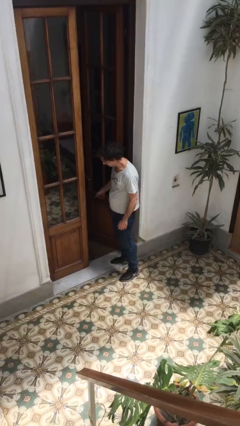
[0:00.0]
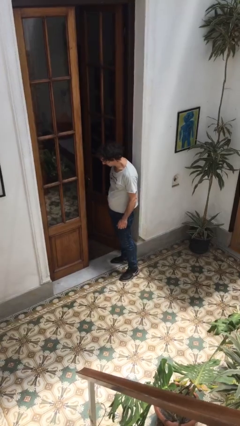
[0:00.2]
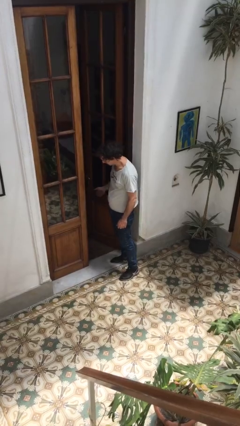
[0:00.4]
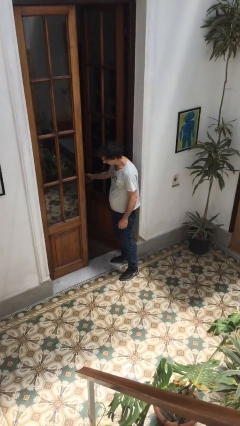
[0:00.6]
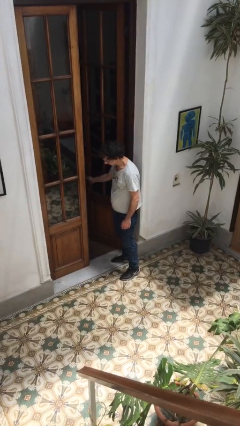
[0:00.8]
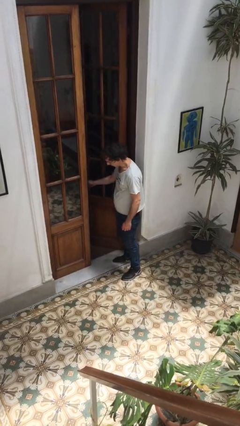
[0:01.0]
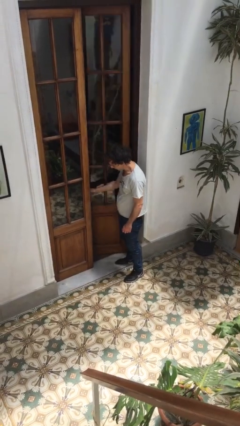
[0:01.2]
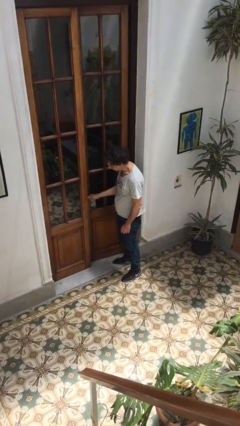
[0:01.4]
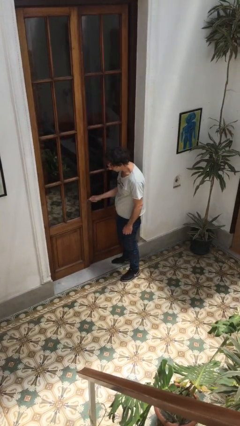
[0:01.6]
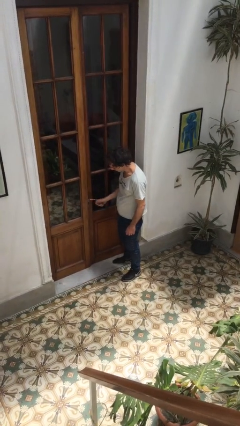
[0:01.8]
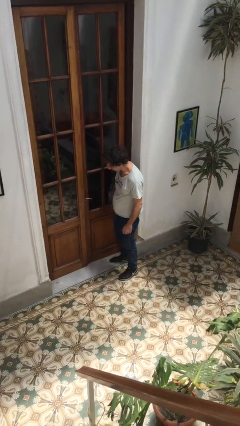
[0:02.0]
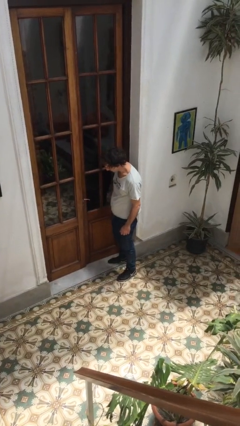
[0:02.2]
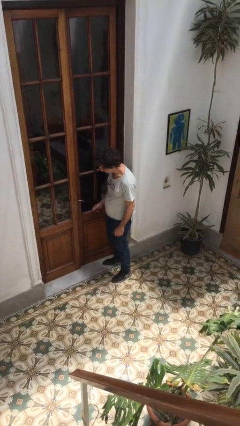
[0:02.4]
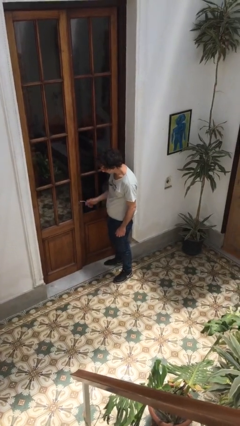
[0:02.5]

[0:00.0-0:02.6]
person closes facility door

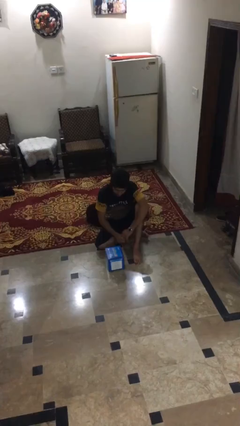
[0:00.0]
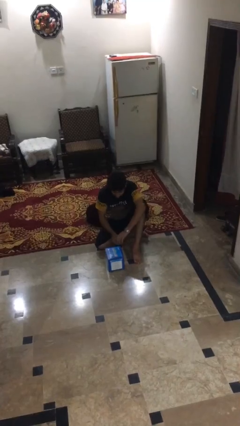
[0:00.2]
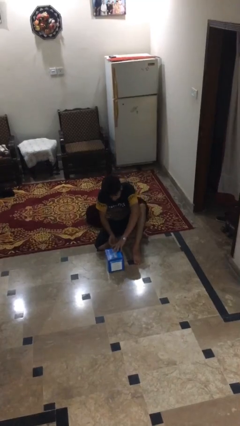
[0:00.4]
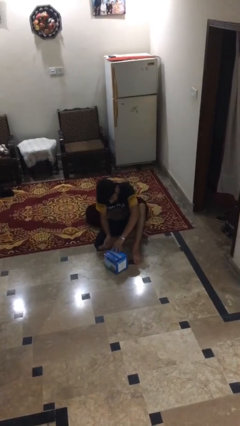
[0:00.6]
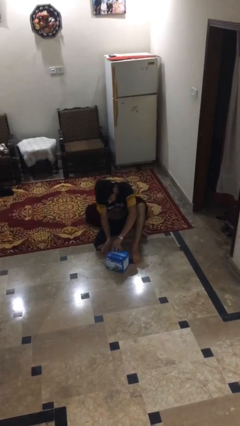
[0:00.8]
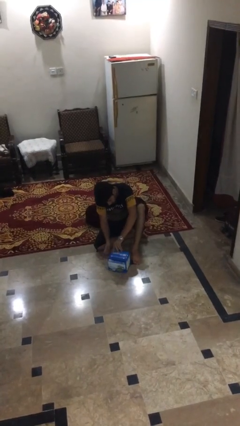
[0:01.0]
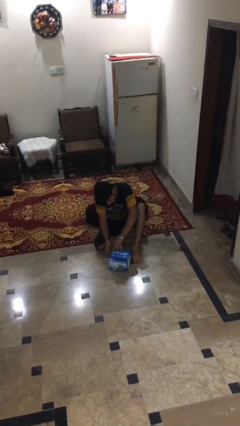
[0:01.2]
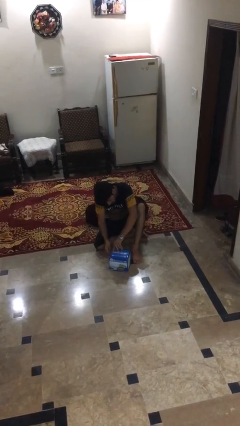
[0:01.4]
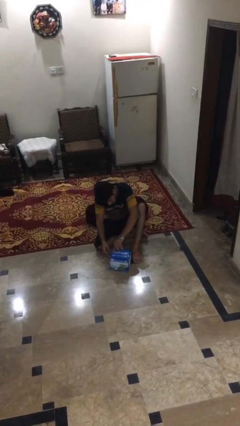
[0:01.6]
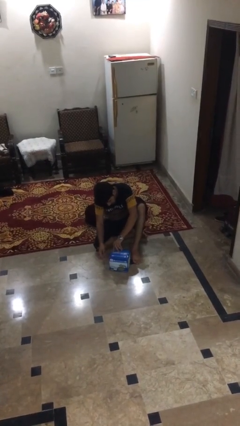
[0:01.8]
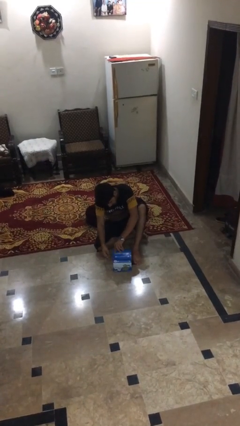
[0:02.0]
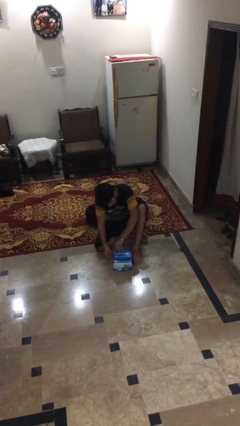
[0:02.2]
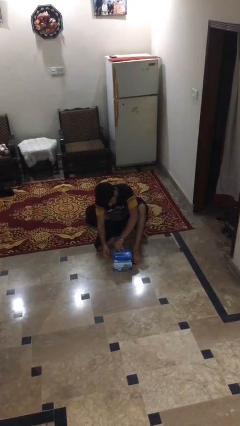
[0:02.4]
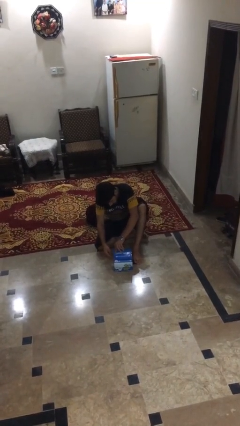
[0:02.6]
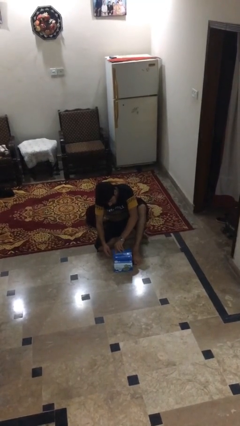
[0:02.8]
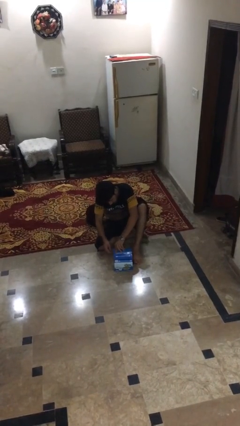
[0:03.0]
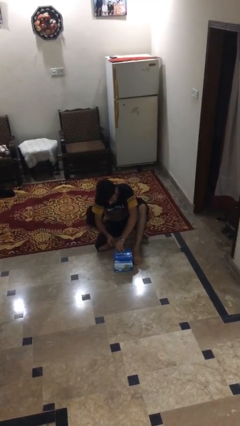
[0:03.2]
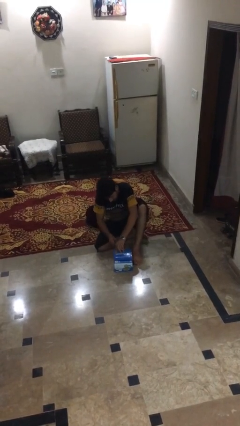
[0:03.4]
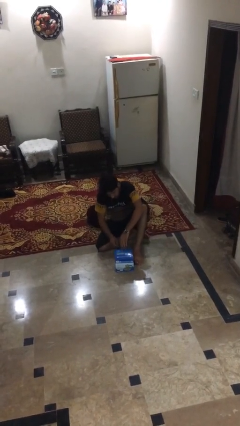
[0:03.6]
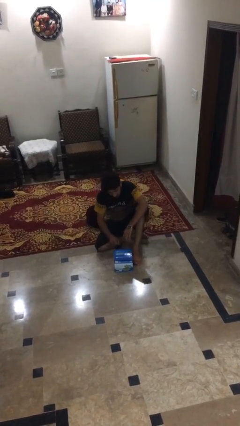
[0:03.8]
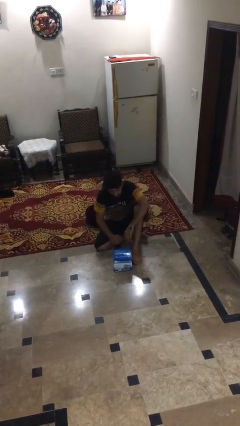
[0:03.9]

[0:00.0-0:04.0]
person taps object with finger

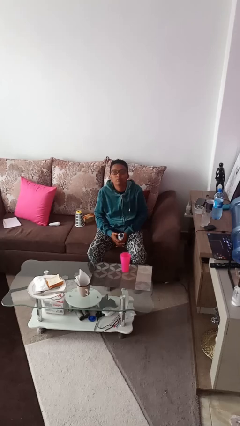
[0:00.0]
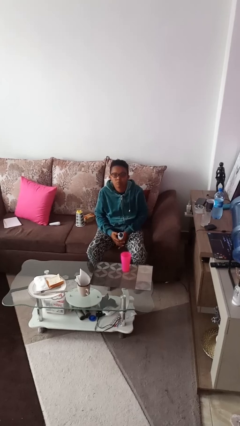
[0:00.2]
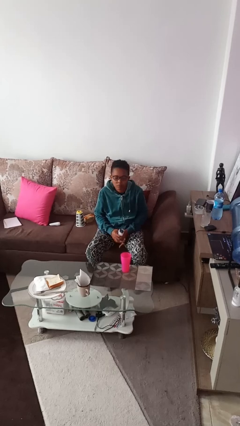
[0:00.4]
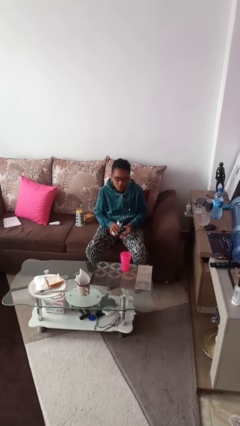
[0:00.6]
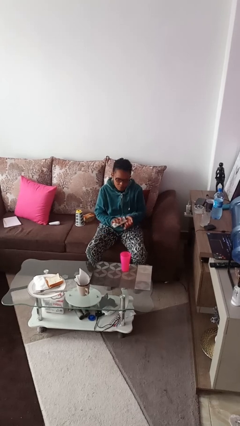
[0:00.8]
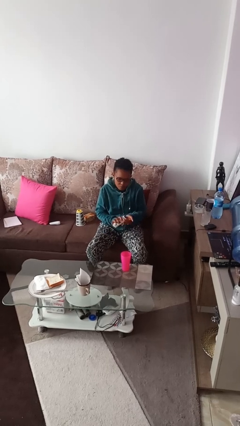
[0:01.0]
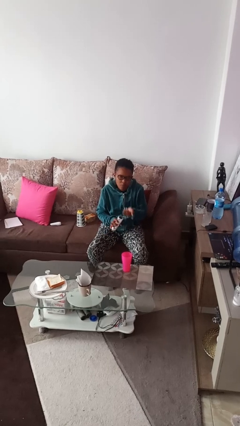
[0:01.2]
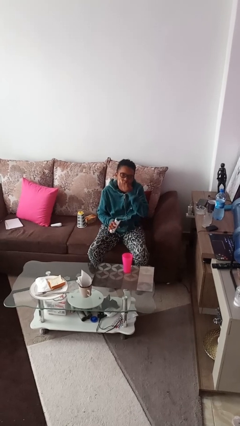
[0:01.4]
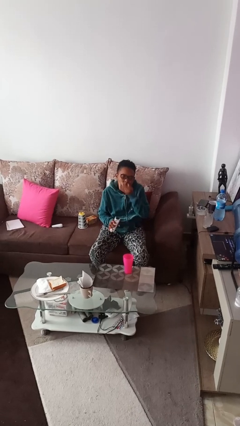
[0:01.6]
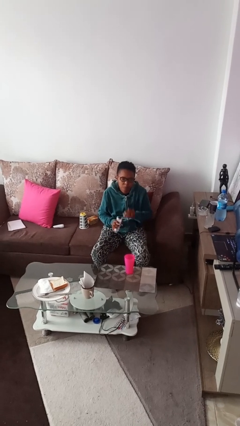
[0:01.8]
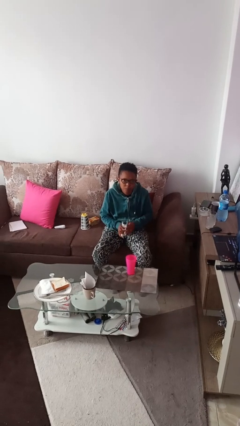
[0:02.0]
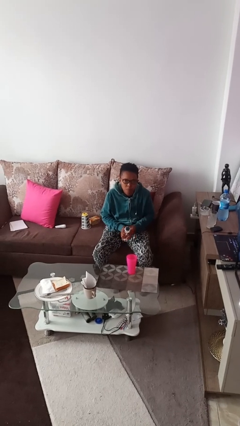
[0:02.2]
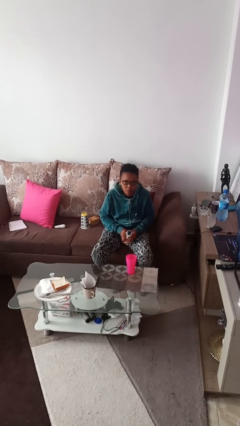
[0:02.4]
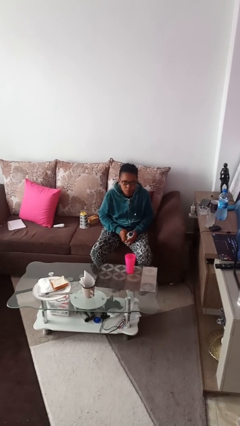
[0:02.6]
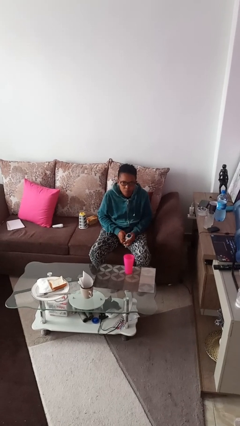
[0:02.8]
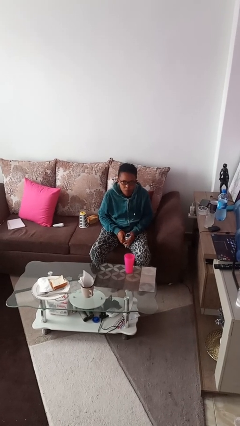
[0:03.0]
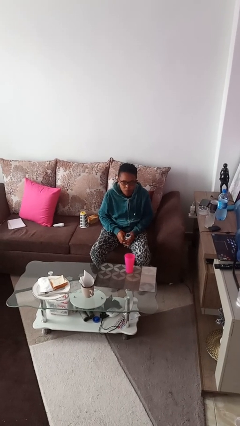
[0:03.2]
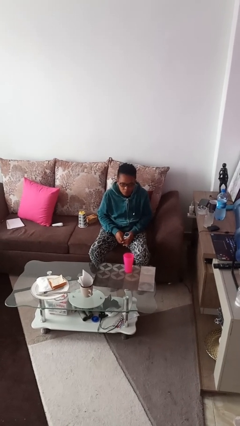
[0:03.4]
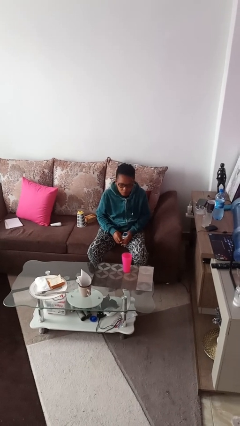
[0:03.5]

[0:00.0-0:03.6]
person takes medicine pills

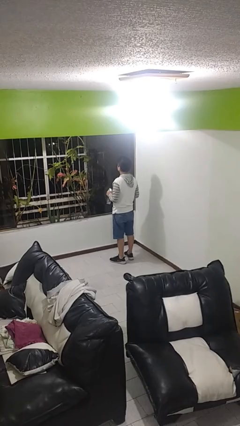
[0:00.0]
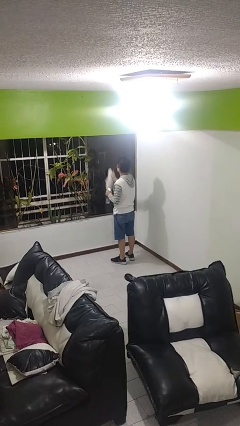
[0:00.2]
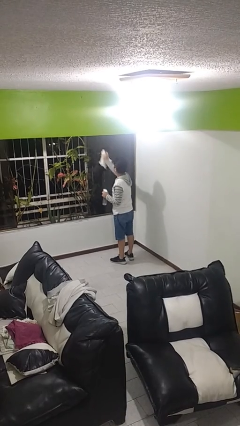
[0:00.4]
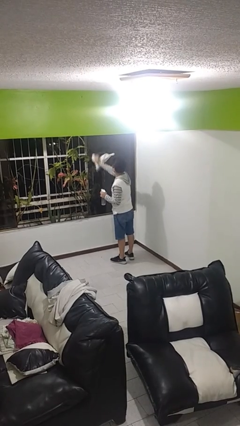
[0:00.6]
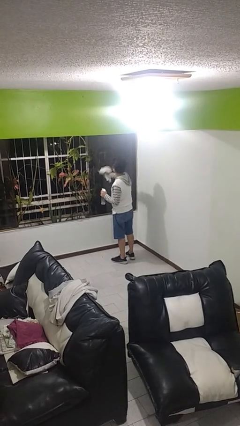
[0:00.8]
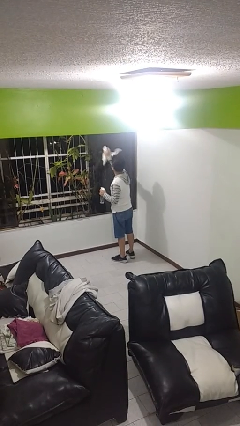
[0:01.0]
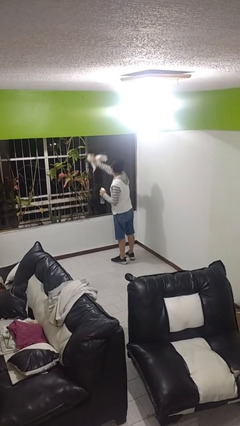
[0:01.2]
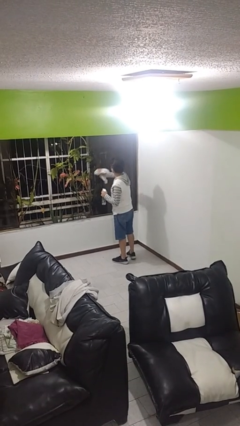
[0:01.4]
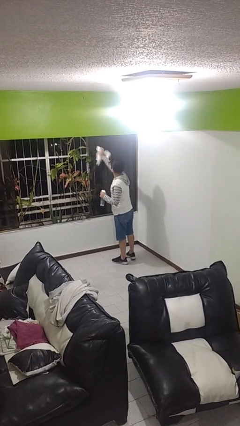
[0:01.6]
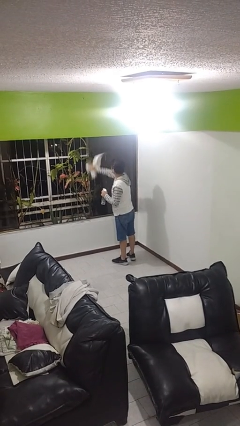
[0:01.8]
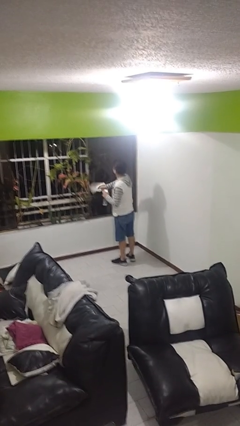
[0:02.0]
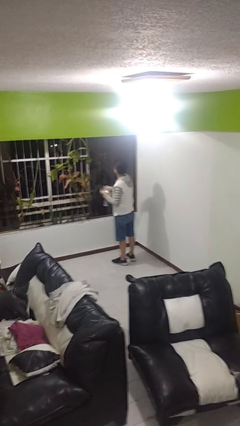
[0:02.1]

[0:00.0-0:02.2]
person washes window

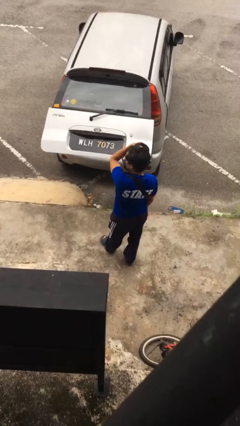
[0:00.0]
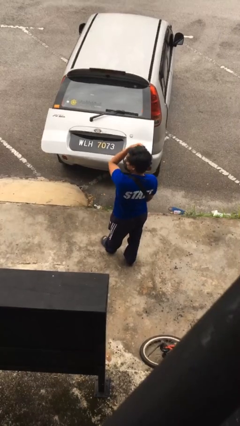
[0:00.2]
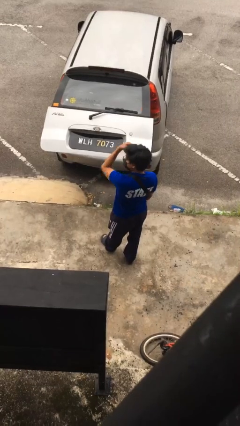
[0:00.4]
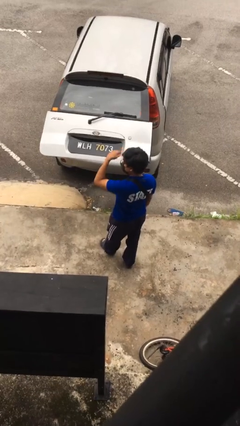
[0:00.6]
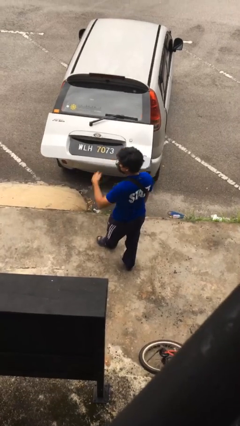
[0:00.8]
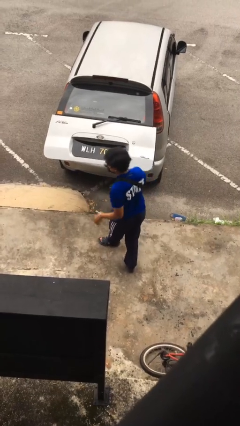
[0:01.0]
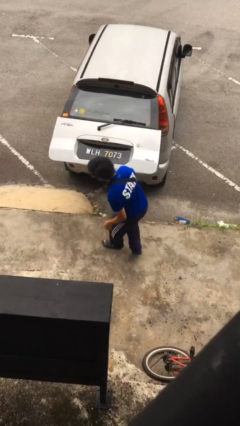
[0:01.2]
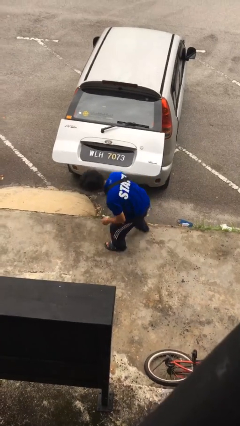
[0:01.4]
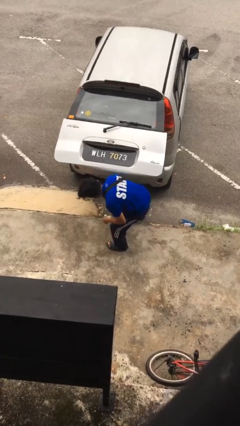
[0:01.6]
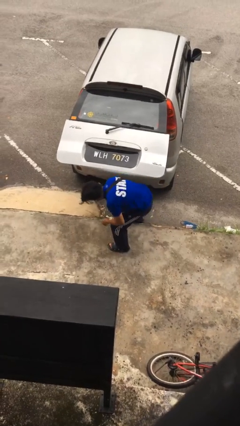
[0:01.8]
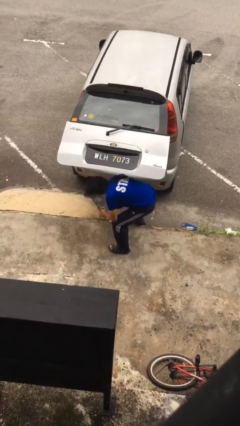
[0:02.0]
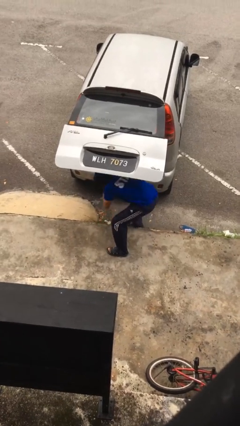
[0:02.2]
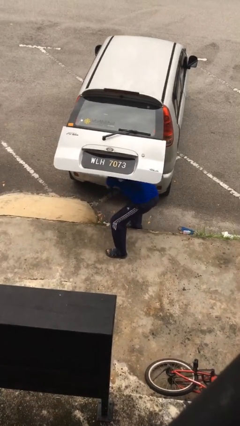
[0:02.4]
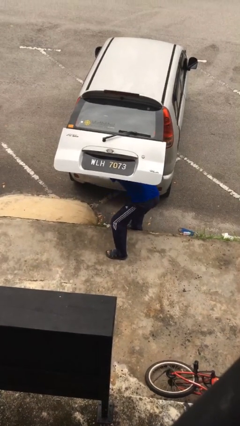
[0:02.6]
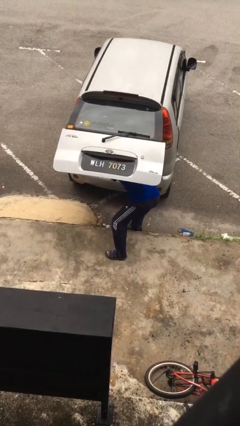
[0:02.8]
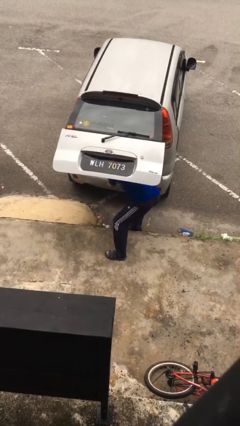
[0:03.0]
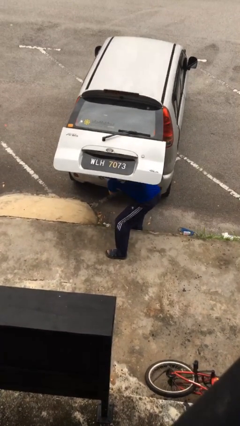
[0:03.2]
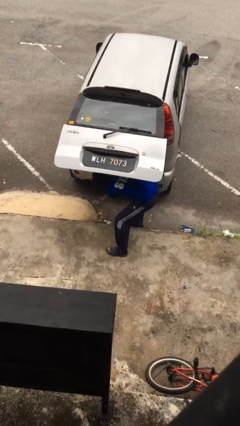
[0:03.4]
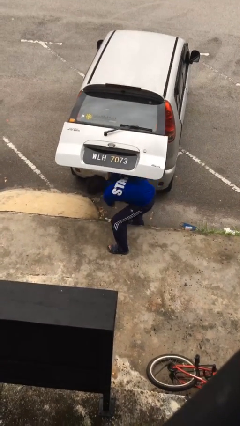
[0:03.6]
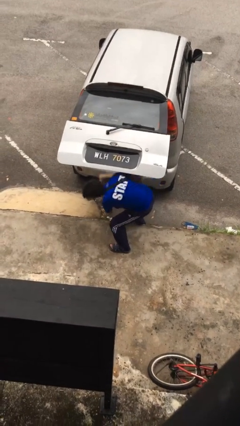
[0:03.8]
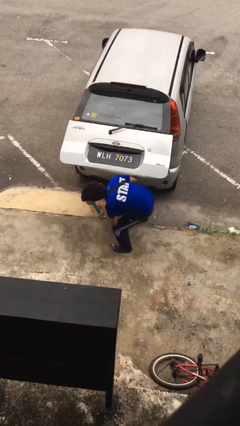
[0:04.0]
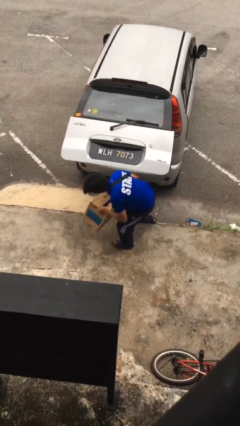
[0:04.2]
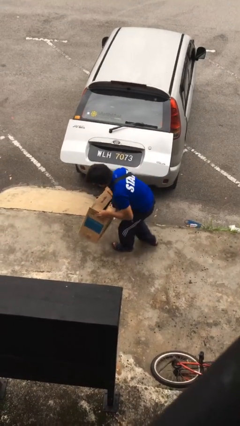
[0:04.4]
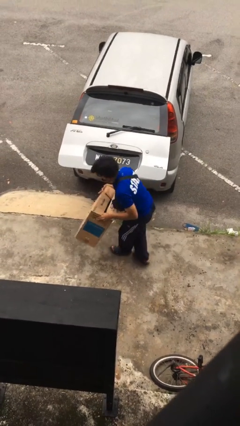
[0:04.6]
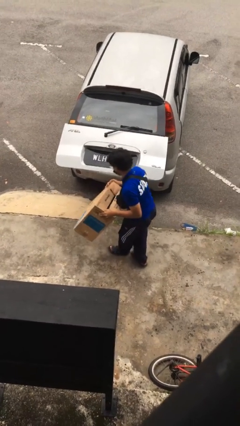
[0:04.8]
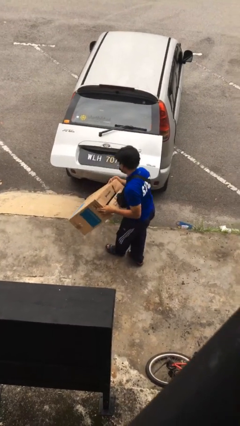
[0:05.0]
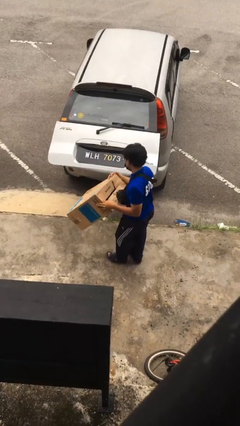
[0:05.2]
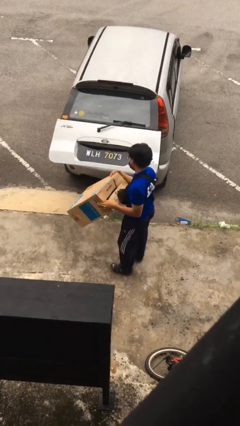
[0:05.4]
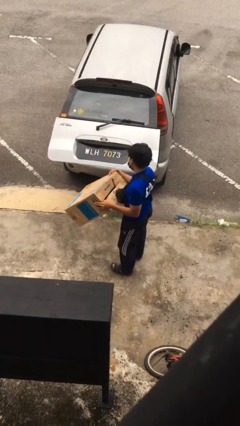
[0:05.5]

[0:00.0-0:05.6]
person unloads car
